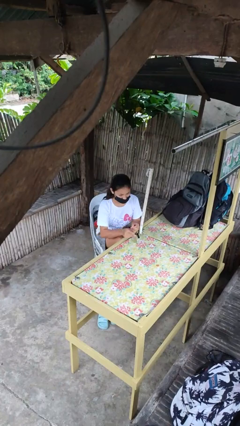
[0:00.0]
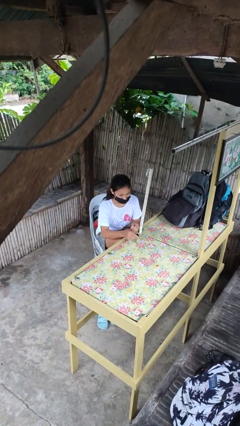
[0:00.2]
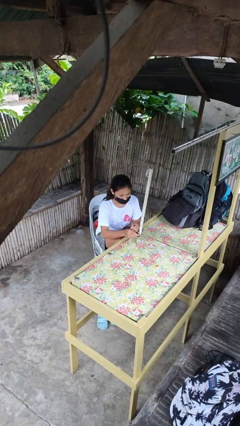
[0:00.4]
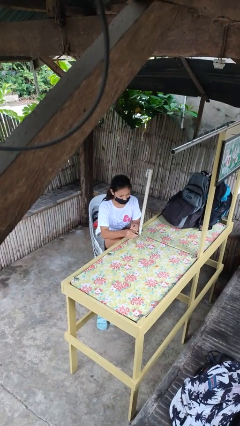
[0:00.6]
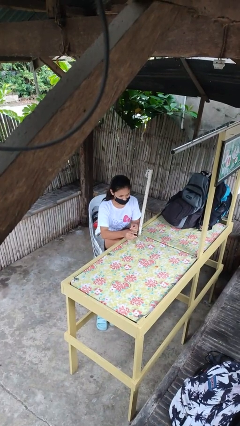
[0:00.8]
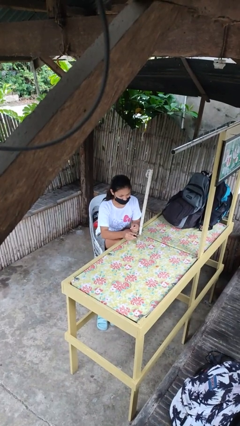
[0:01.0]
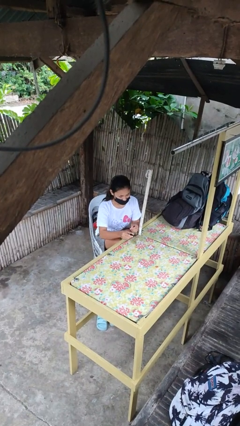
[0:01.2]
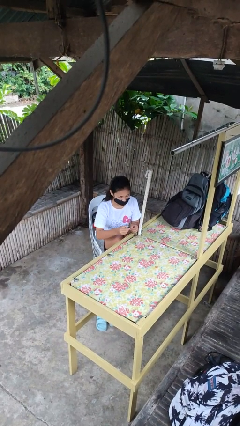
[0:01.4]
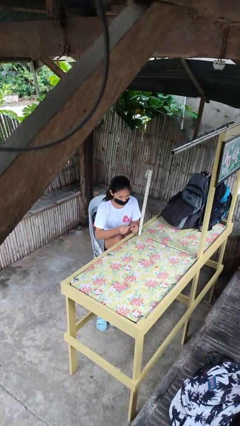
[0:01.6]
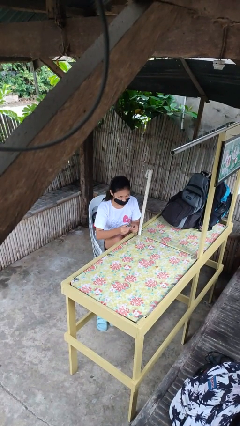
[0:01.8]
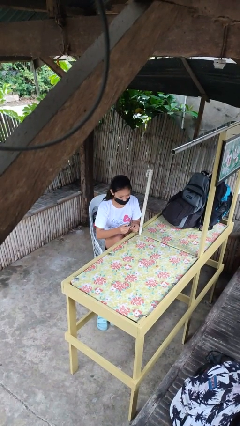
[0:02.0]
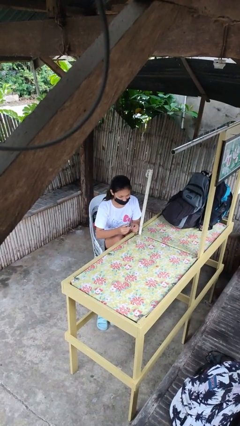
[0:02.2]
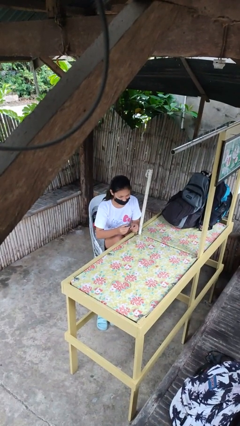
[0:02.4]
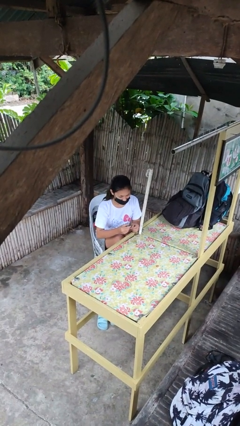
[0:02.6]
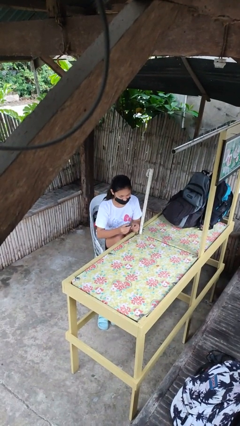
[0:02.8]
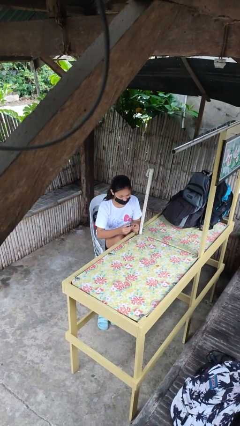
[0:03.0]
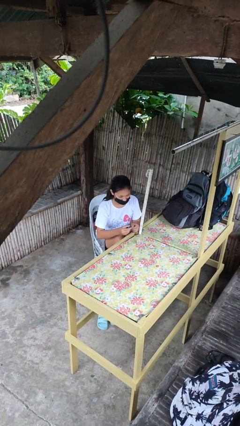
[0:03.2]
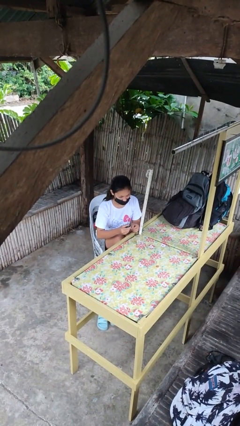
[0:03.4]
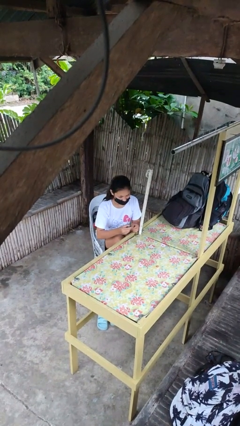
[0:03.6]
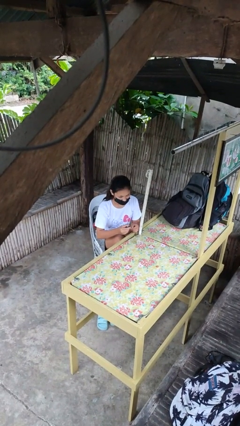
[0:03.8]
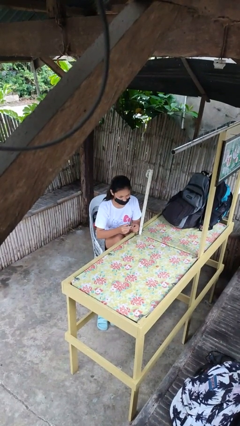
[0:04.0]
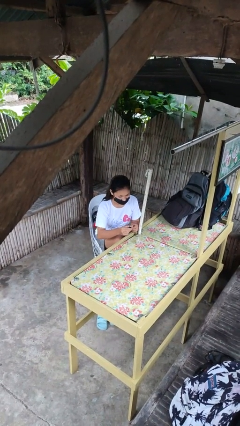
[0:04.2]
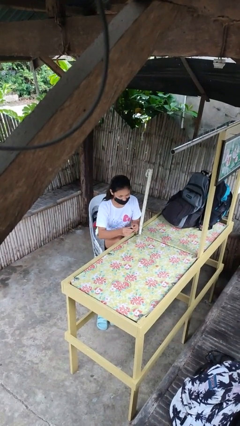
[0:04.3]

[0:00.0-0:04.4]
person paints fingernails

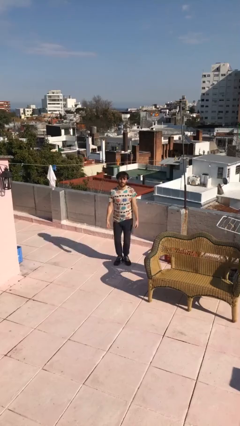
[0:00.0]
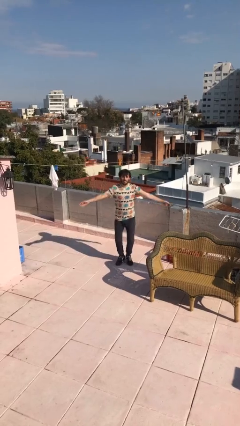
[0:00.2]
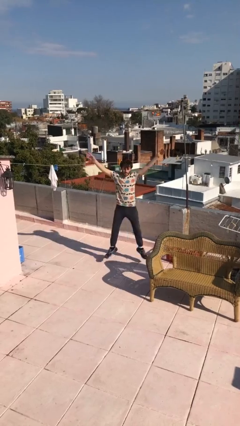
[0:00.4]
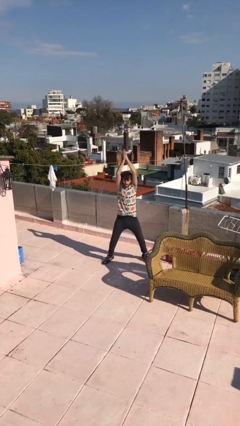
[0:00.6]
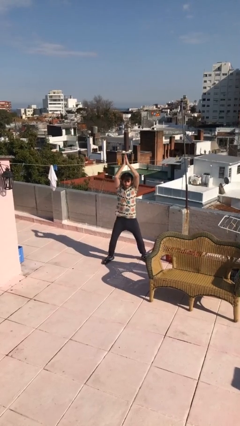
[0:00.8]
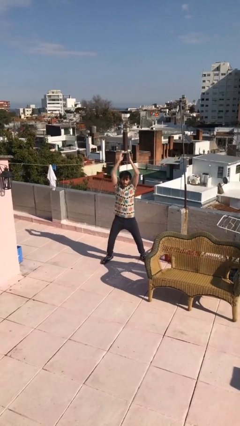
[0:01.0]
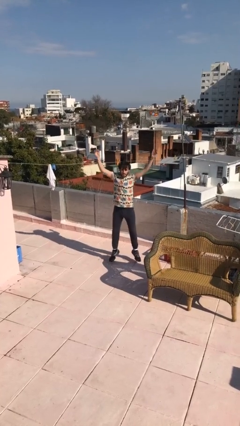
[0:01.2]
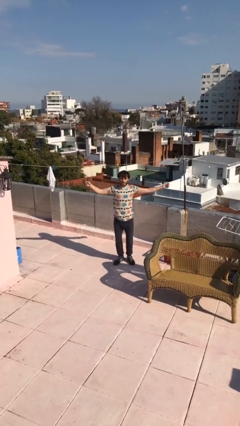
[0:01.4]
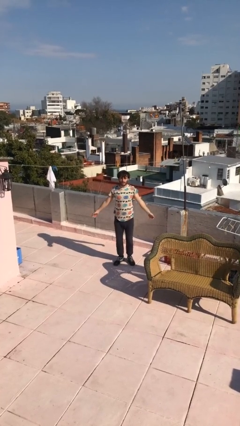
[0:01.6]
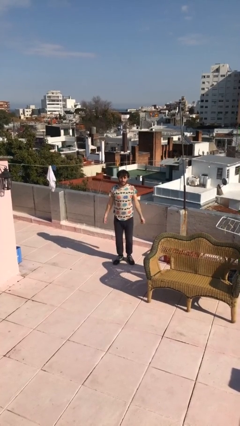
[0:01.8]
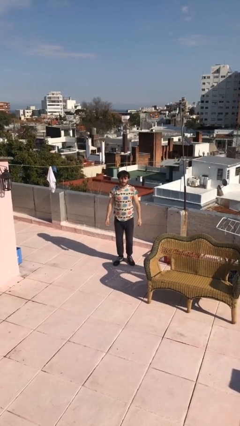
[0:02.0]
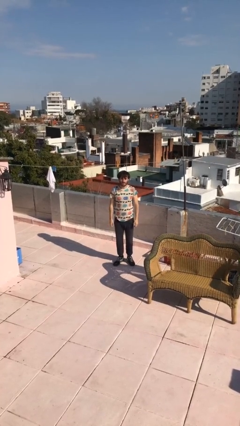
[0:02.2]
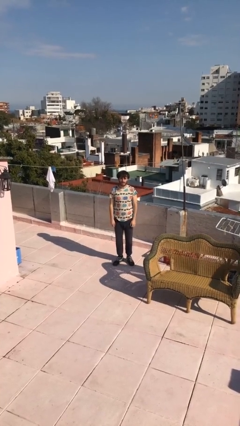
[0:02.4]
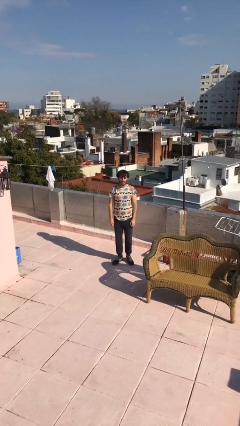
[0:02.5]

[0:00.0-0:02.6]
person exercises with jumping jacks

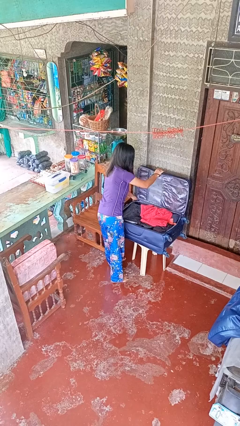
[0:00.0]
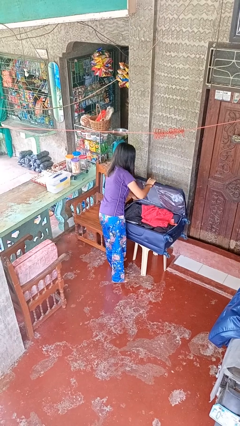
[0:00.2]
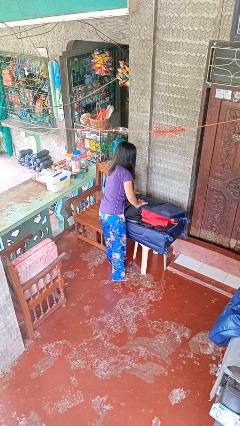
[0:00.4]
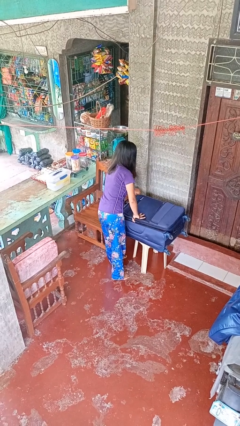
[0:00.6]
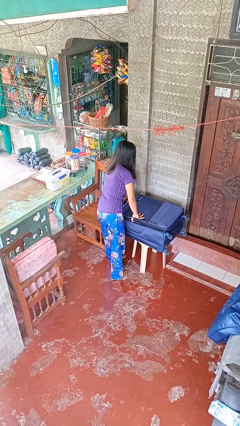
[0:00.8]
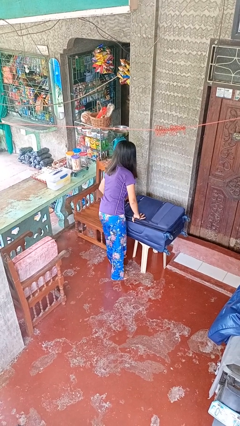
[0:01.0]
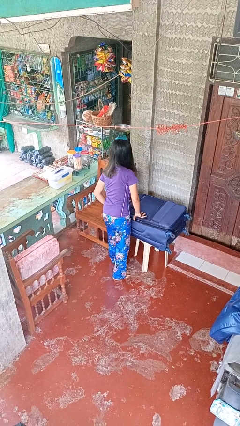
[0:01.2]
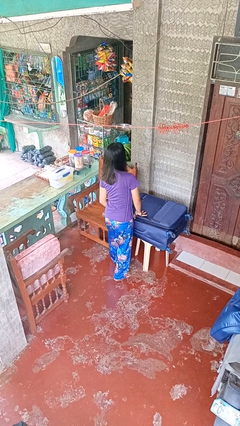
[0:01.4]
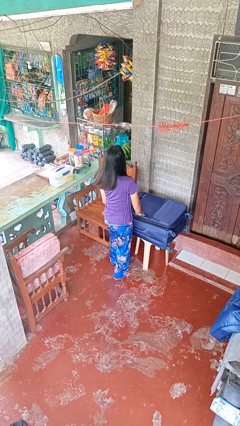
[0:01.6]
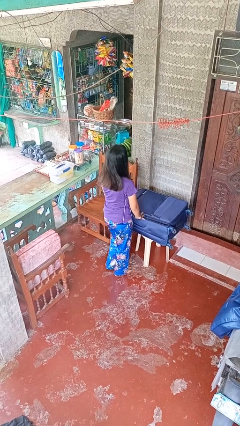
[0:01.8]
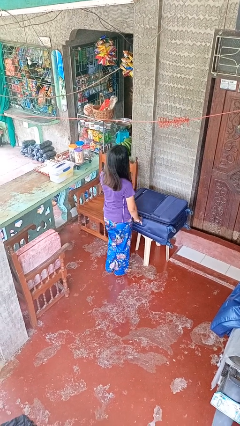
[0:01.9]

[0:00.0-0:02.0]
person closes suitcase

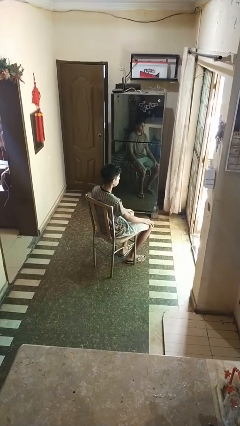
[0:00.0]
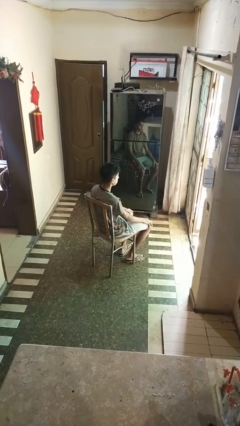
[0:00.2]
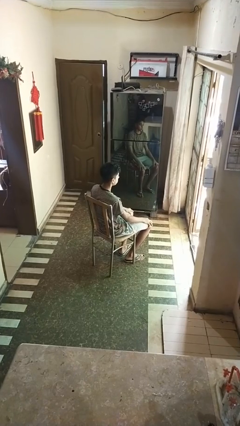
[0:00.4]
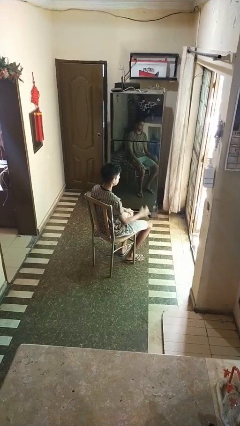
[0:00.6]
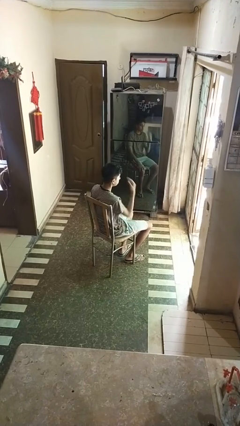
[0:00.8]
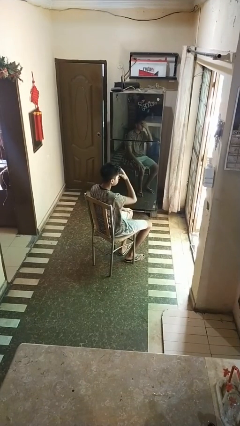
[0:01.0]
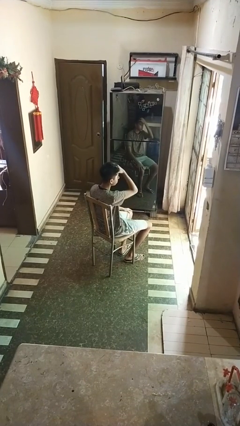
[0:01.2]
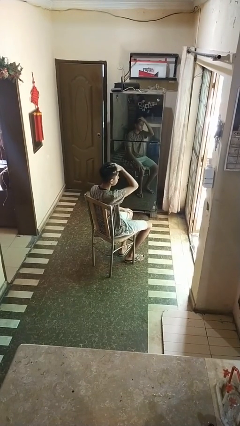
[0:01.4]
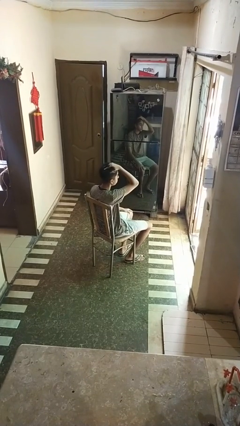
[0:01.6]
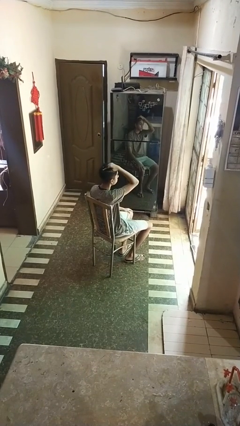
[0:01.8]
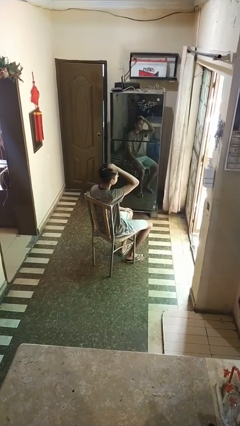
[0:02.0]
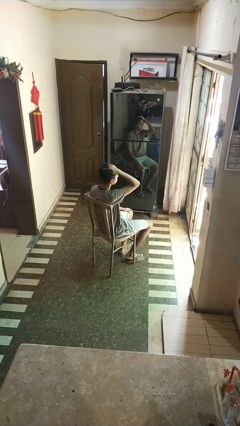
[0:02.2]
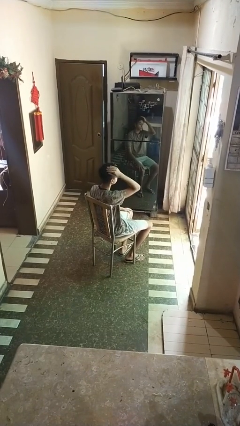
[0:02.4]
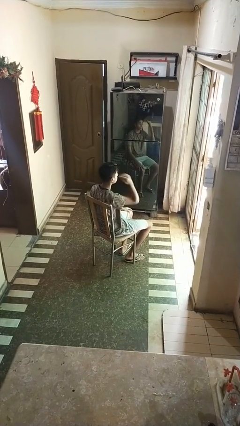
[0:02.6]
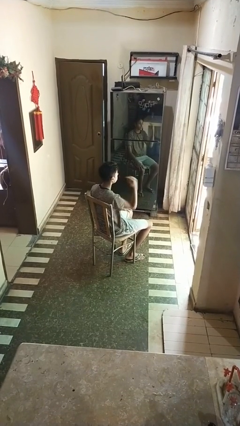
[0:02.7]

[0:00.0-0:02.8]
person strokes hair

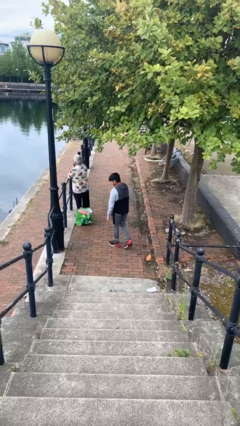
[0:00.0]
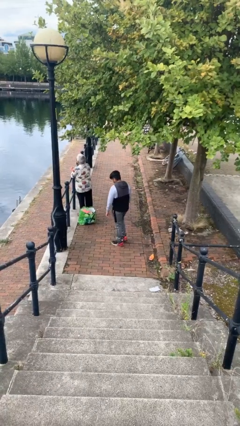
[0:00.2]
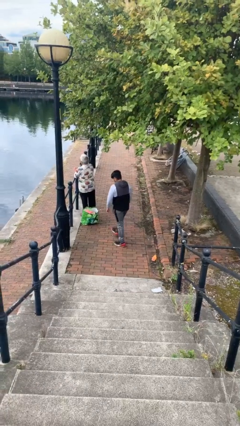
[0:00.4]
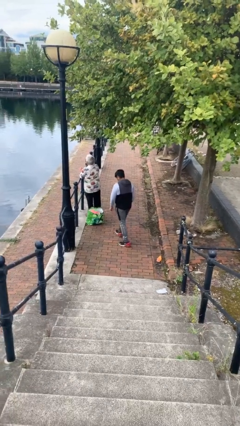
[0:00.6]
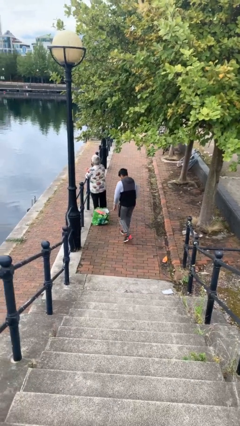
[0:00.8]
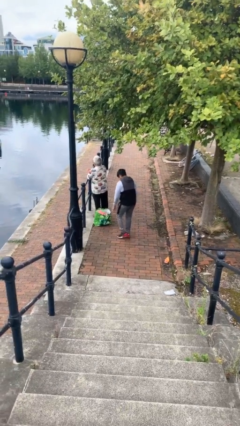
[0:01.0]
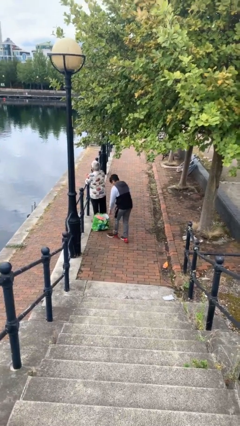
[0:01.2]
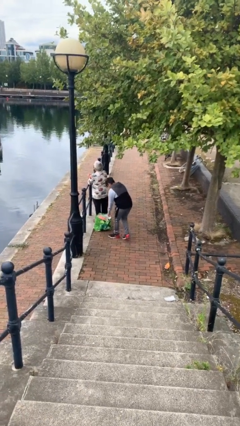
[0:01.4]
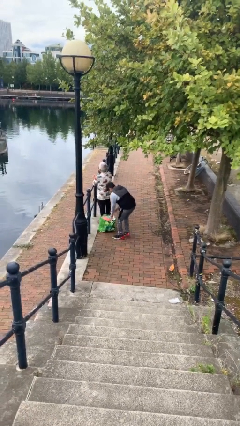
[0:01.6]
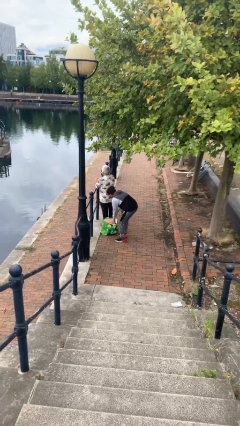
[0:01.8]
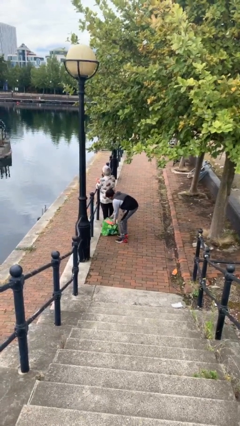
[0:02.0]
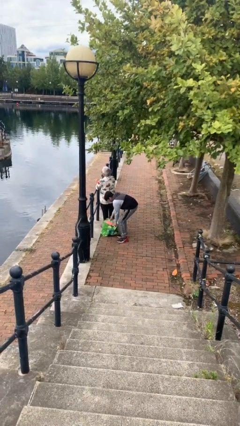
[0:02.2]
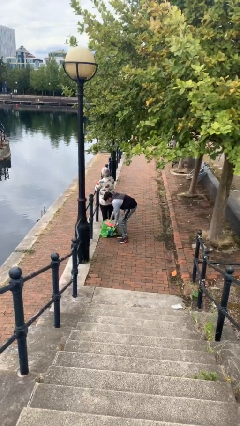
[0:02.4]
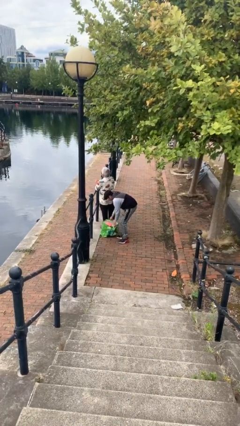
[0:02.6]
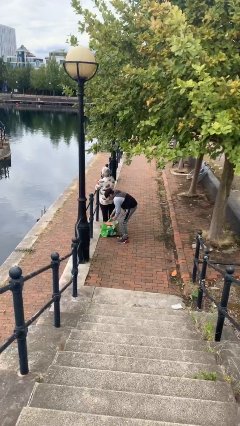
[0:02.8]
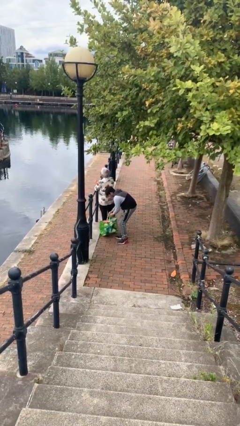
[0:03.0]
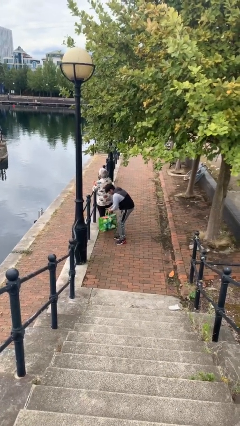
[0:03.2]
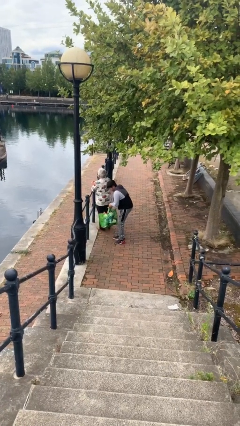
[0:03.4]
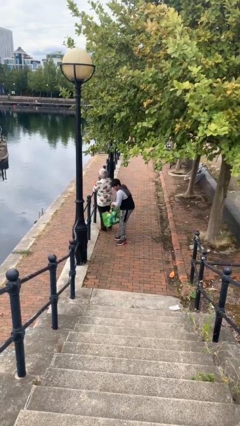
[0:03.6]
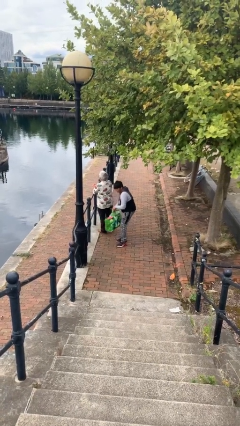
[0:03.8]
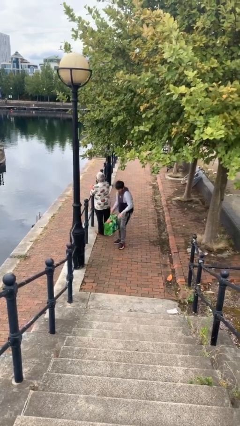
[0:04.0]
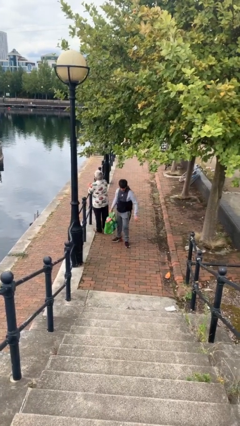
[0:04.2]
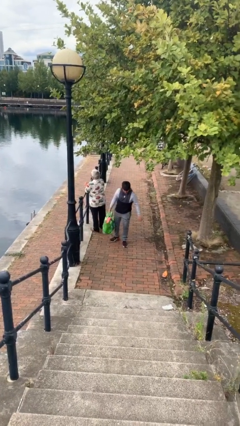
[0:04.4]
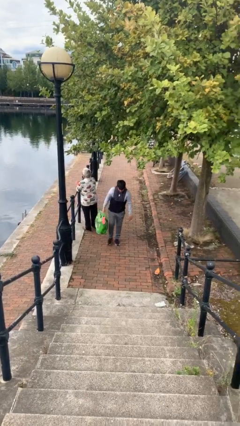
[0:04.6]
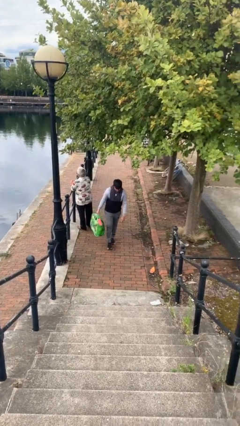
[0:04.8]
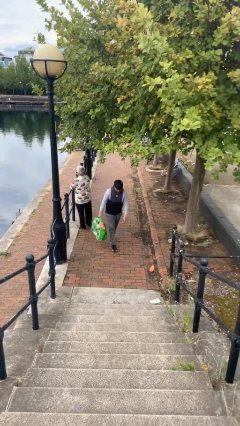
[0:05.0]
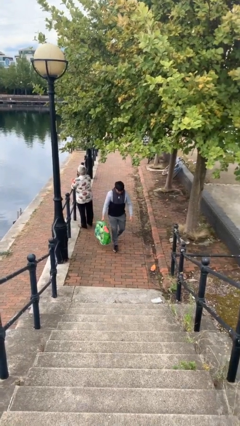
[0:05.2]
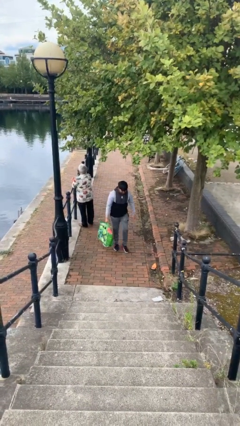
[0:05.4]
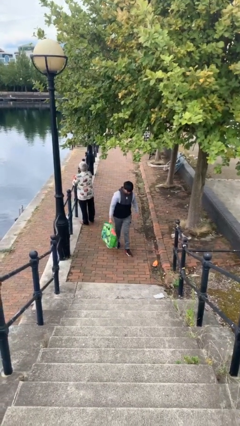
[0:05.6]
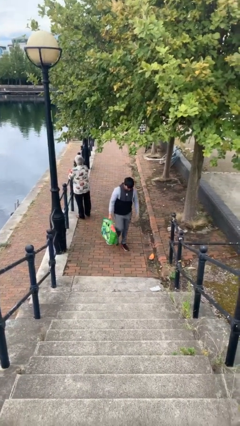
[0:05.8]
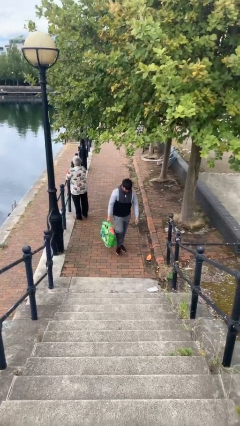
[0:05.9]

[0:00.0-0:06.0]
person steals object from person
